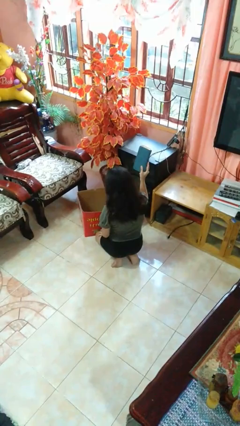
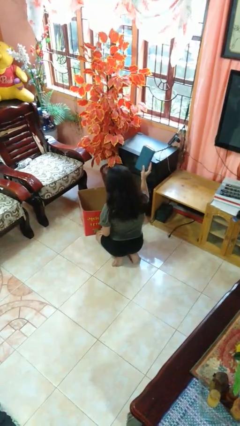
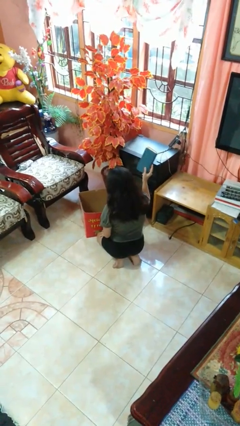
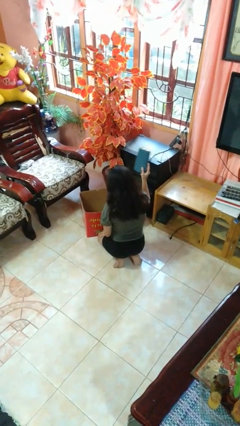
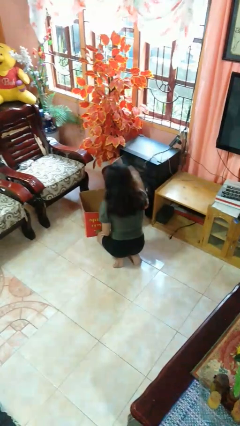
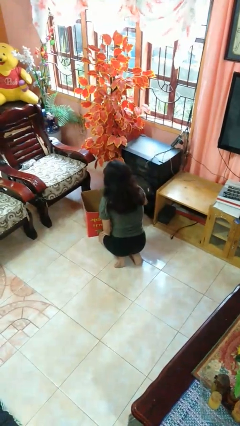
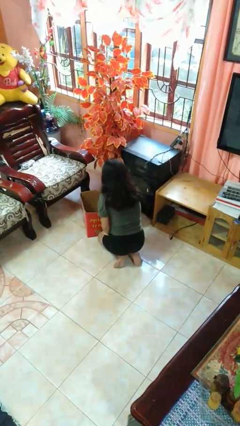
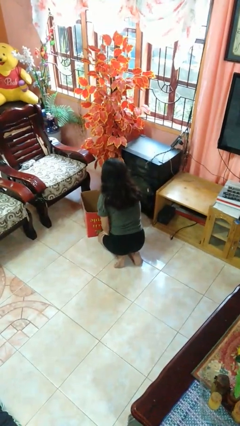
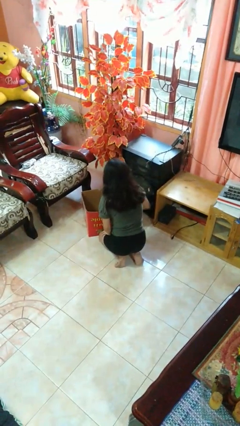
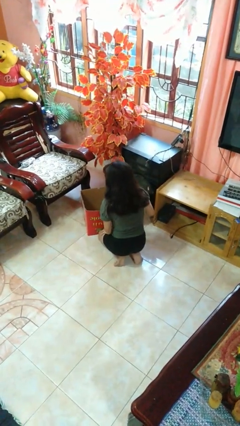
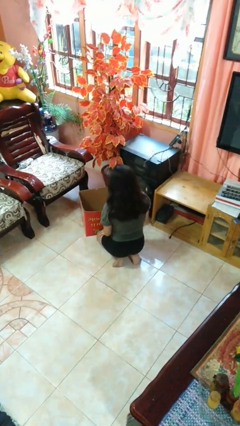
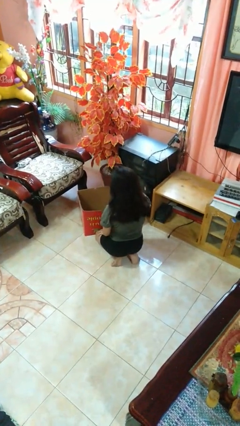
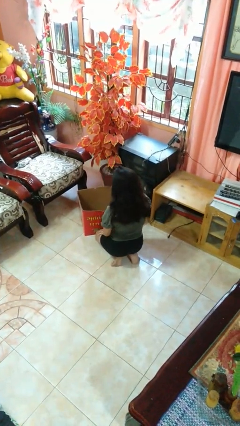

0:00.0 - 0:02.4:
person puts object into box

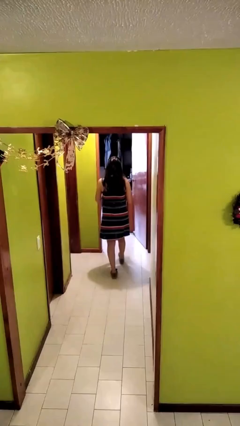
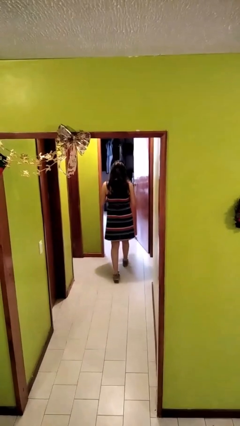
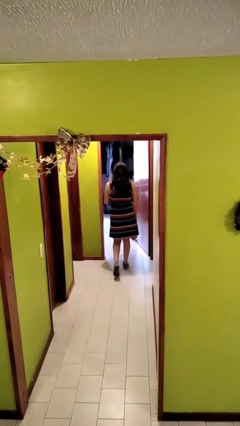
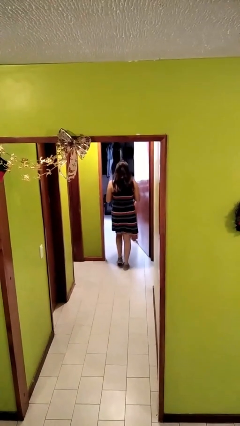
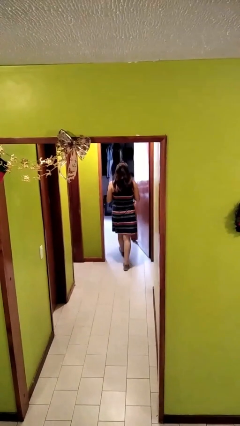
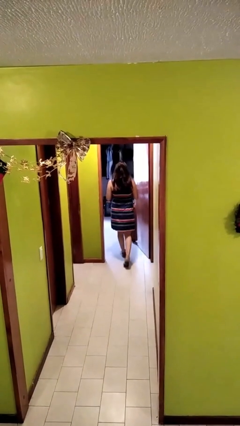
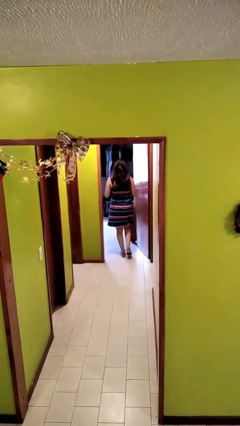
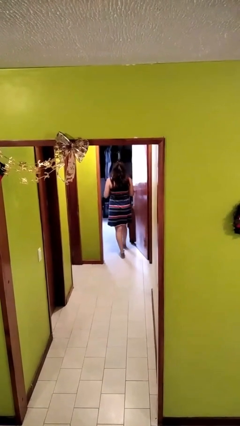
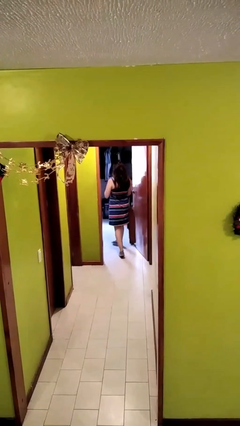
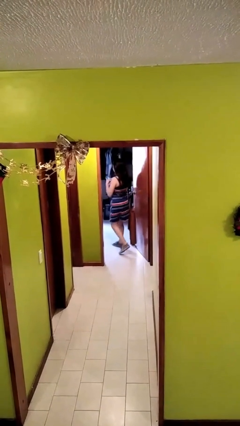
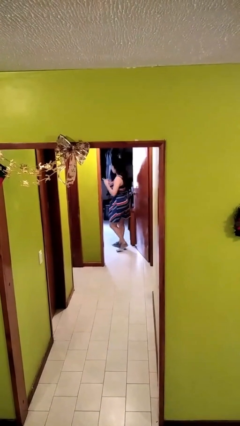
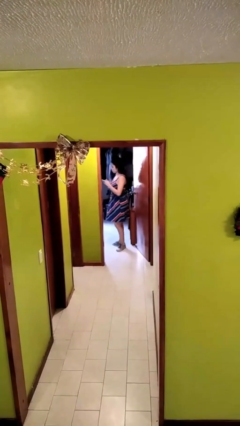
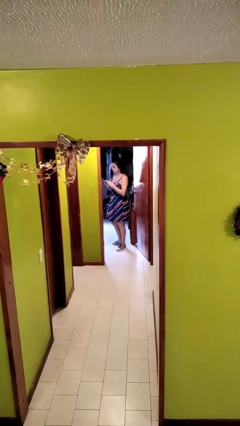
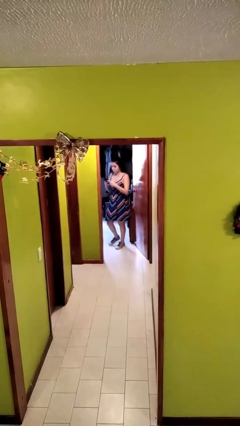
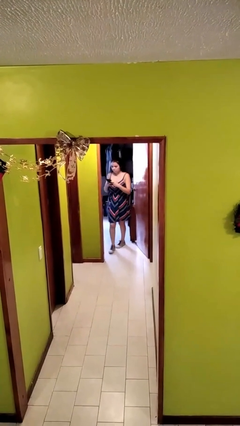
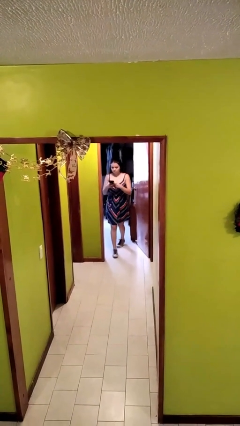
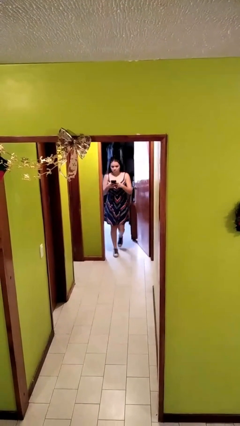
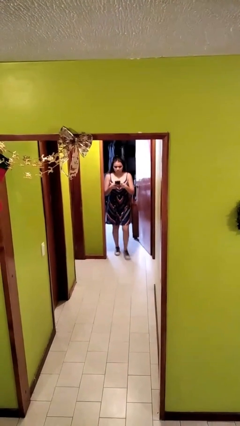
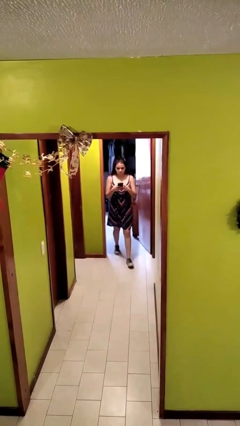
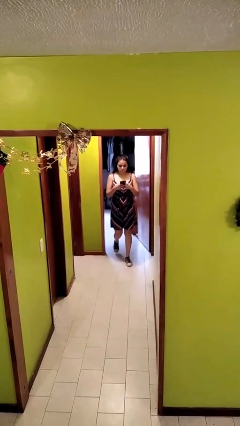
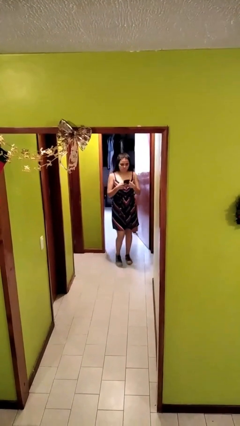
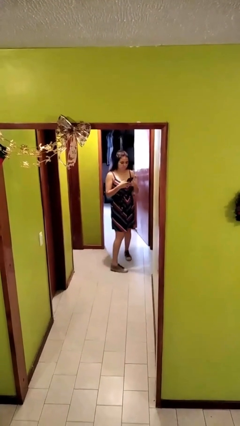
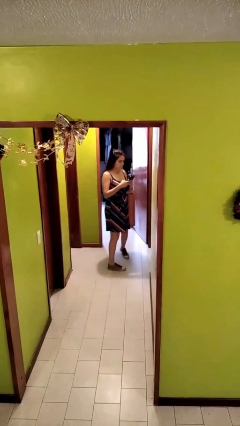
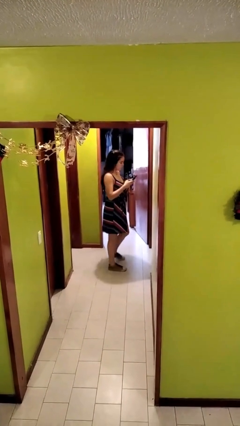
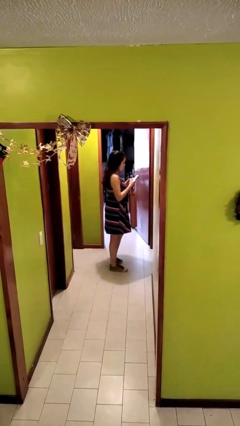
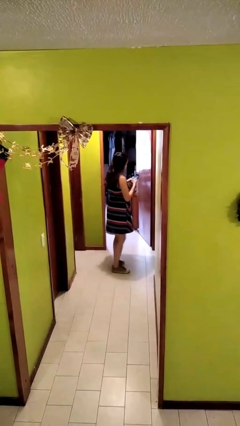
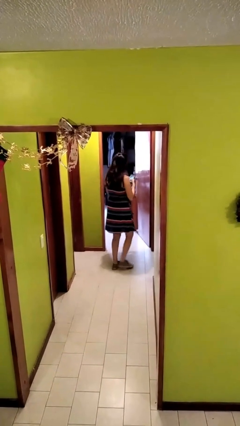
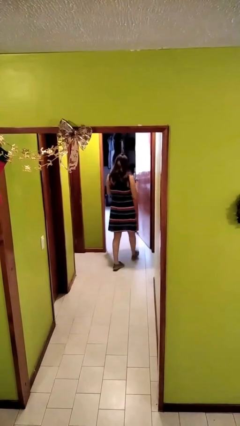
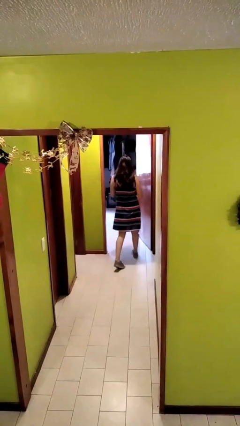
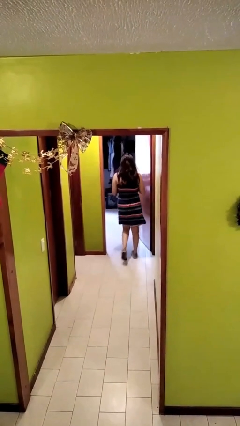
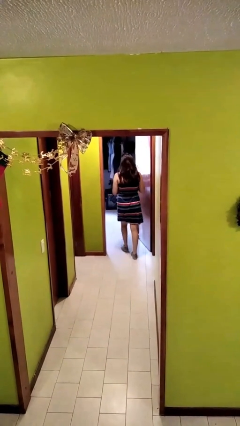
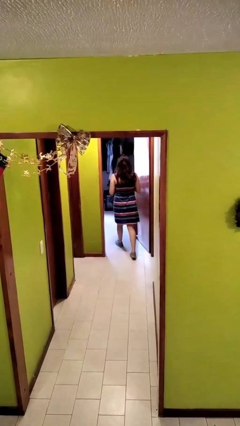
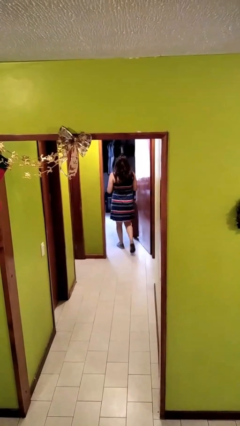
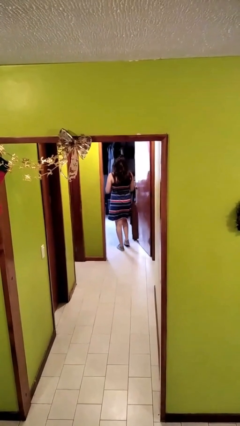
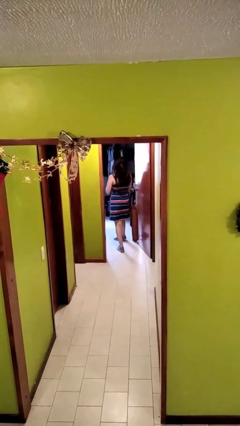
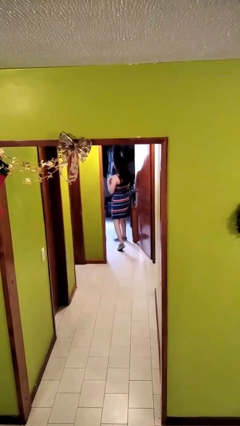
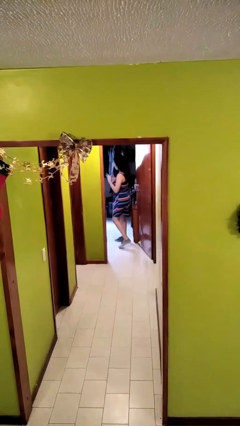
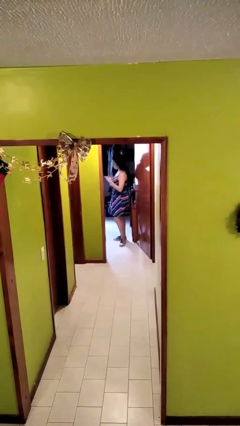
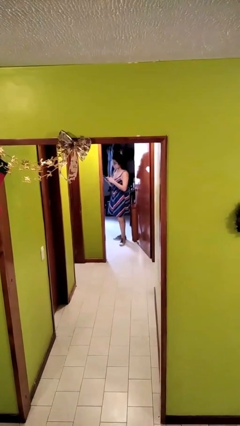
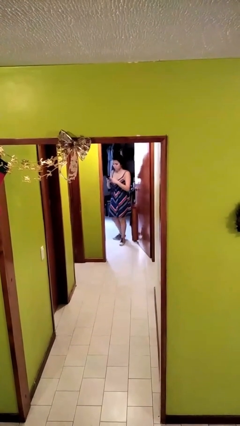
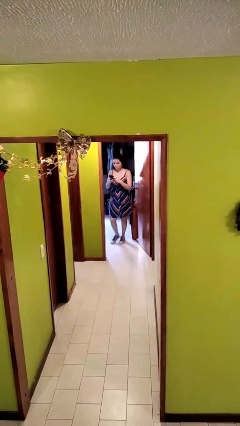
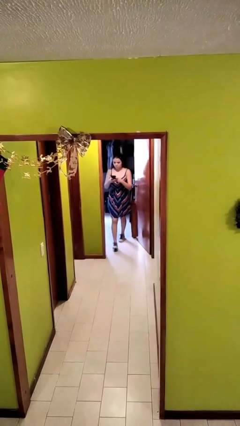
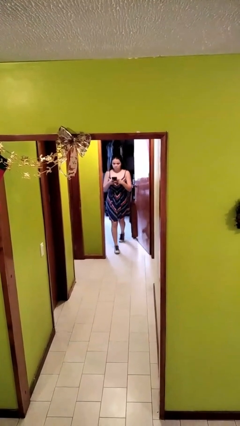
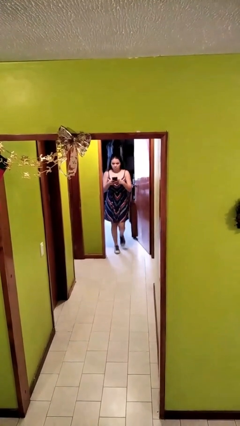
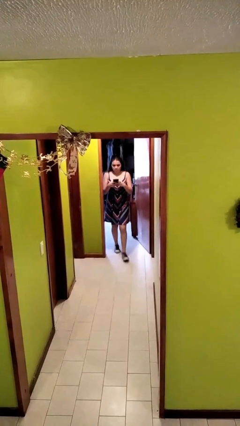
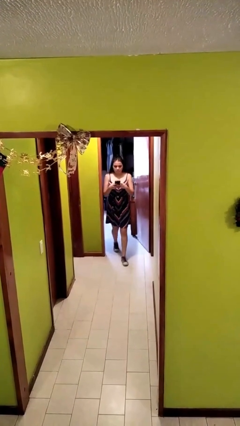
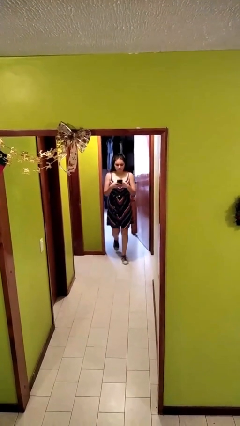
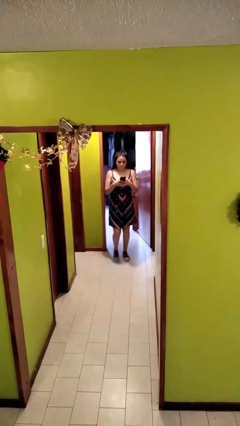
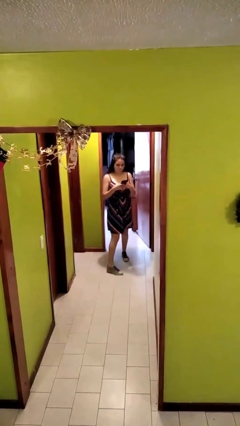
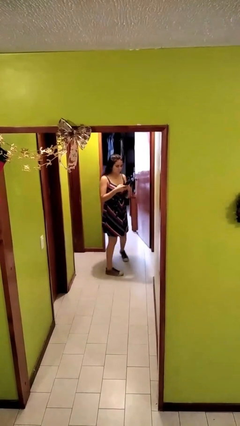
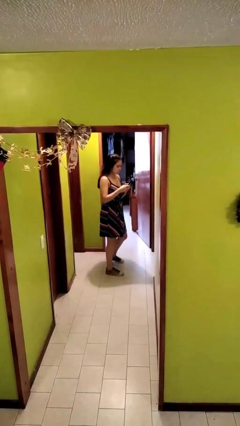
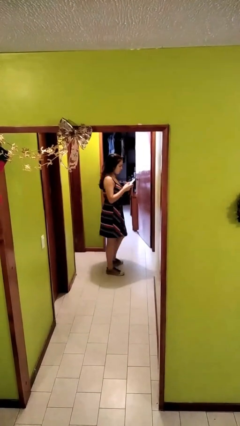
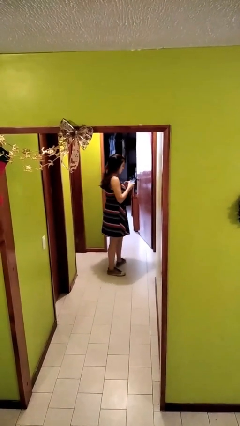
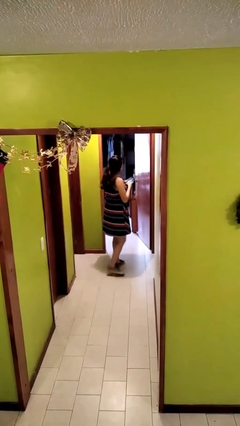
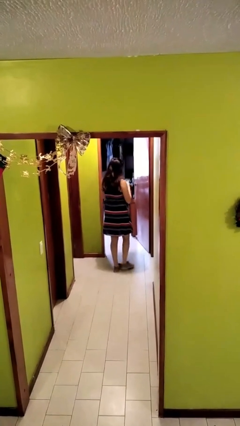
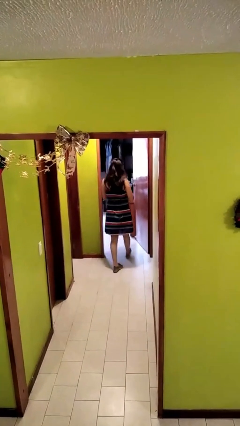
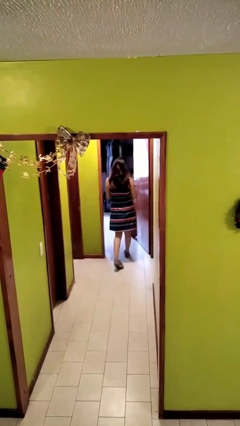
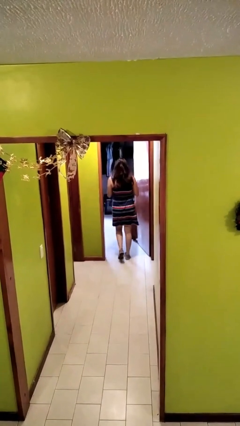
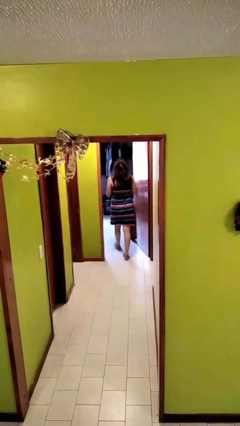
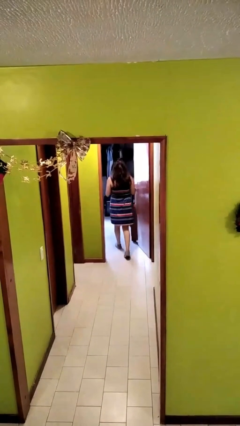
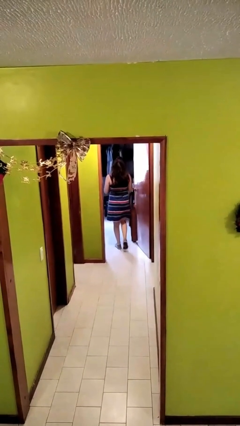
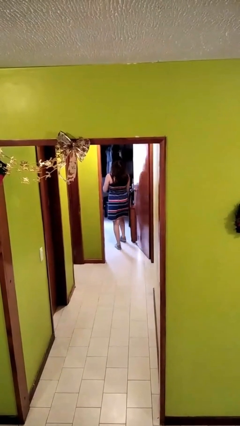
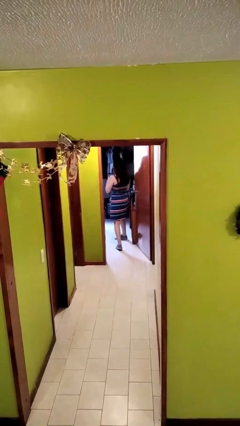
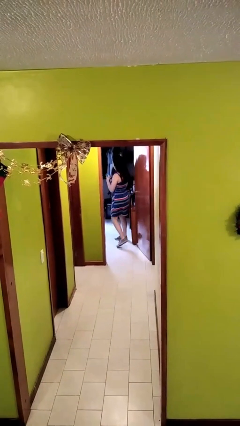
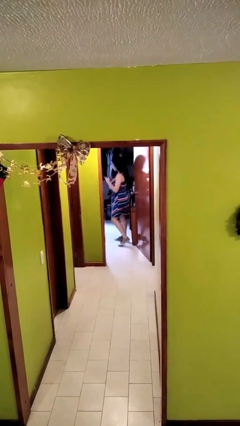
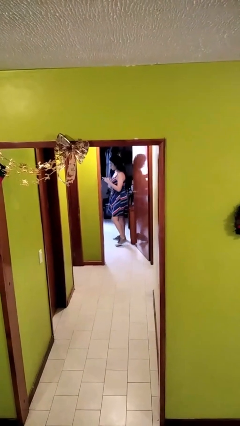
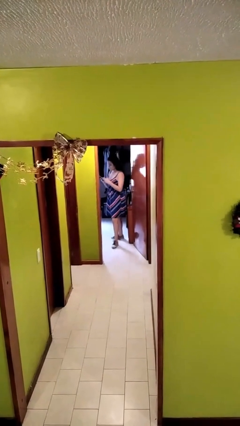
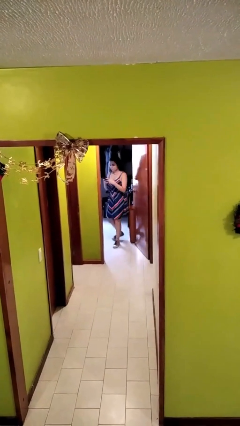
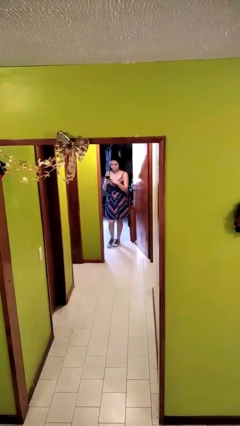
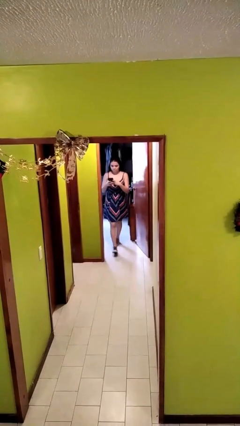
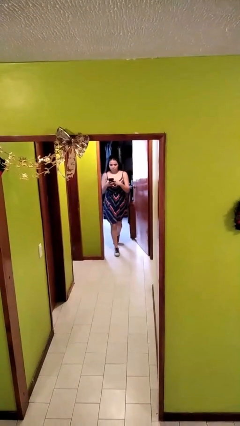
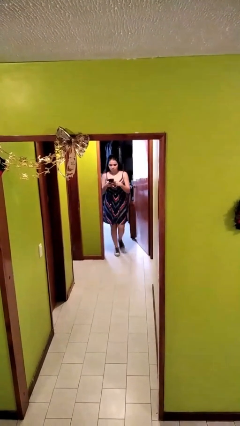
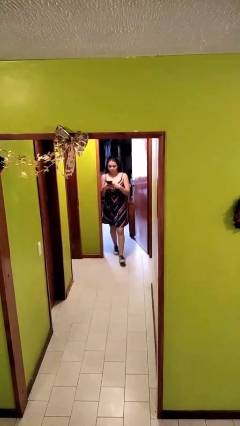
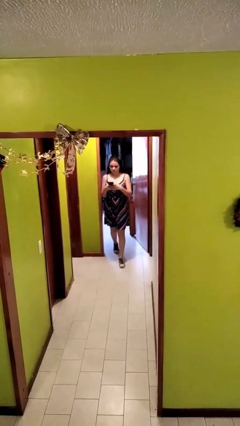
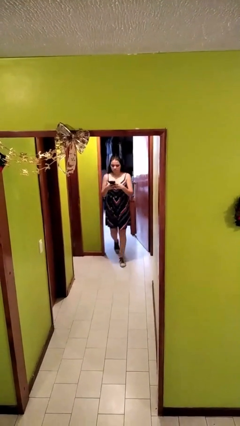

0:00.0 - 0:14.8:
person texts on phone

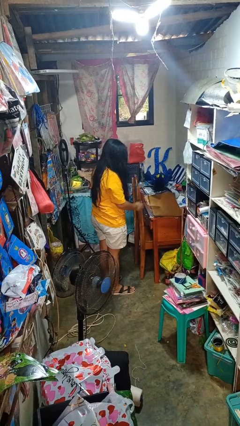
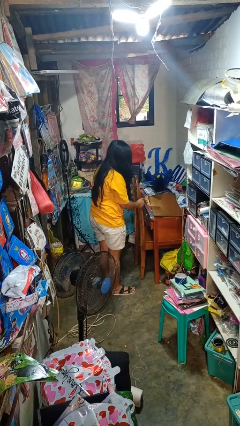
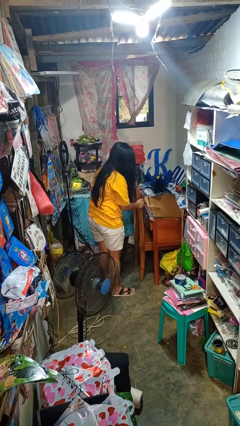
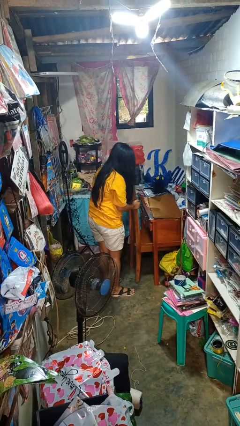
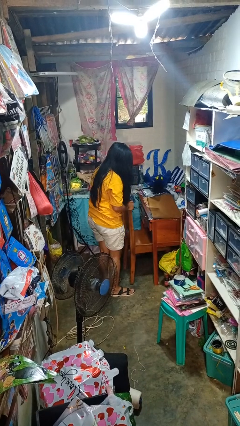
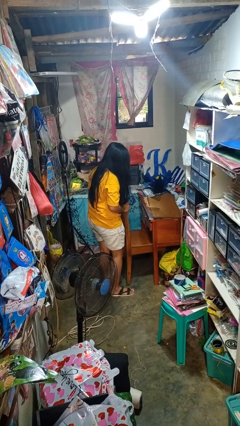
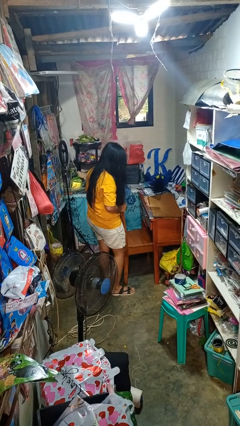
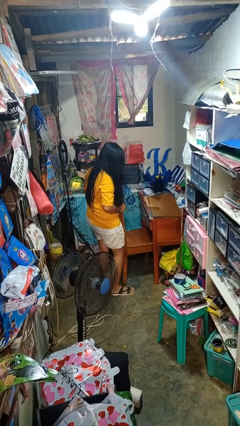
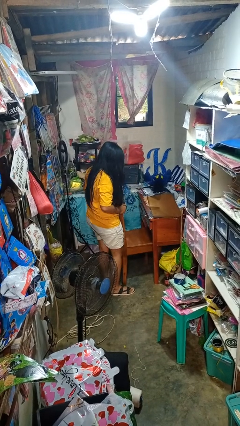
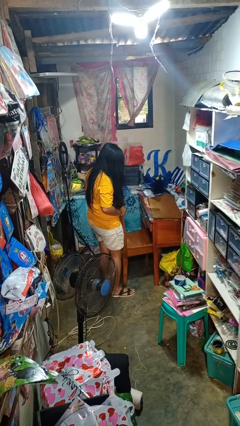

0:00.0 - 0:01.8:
person pulls out chair
